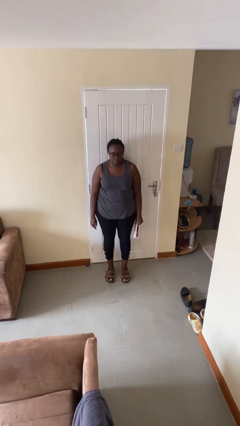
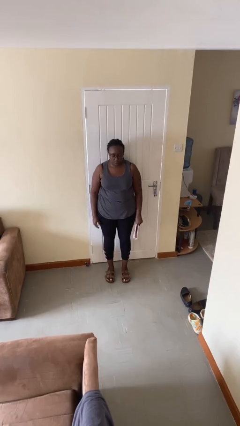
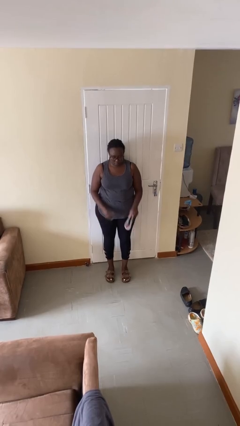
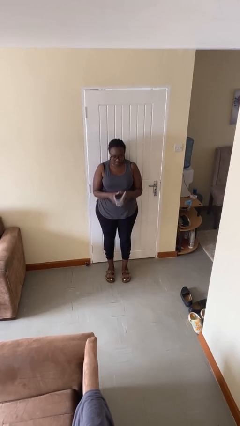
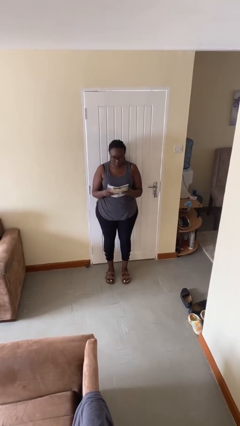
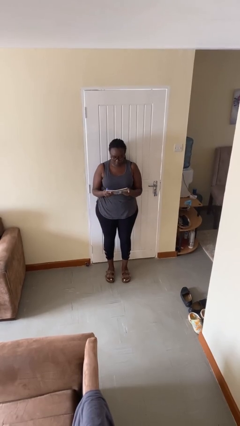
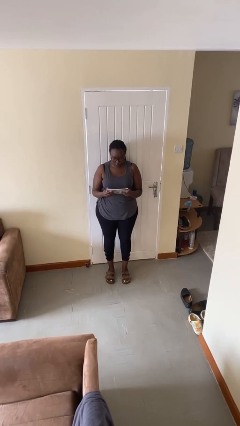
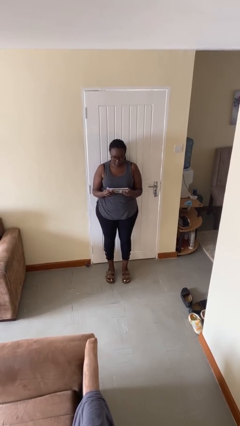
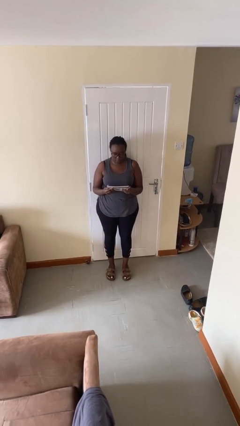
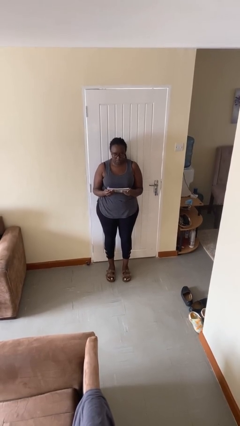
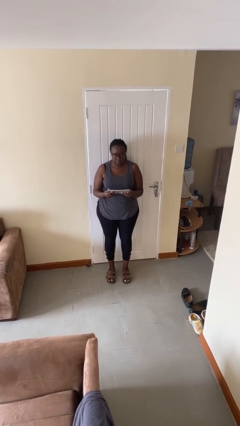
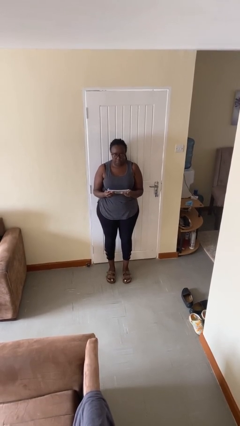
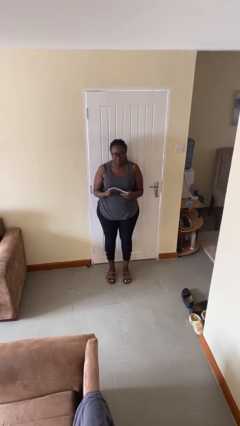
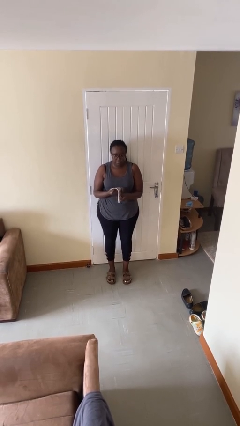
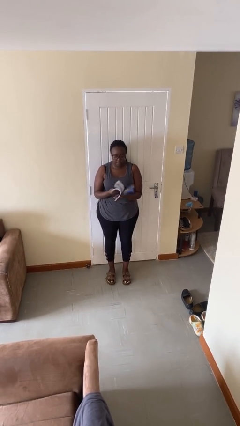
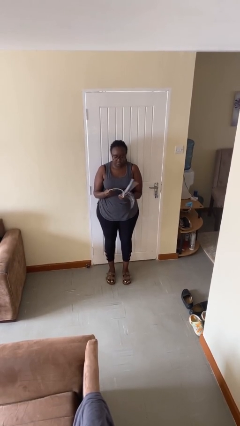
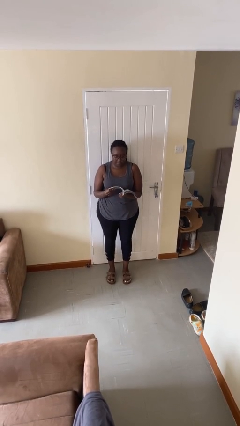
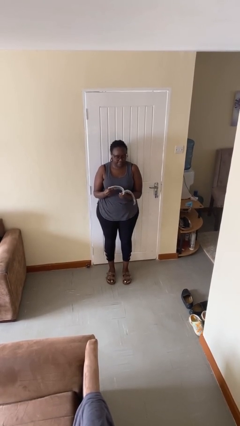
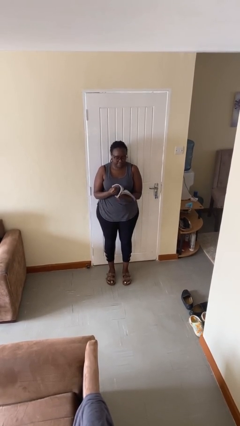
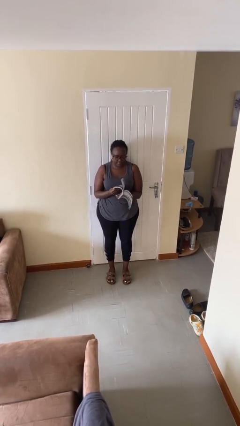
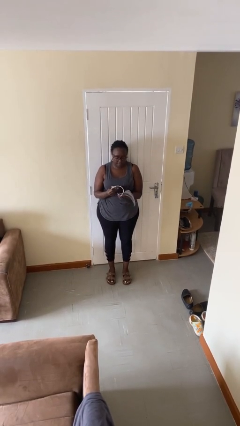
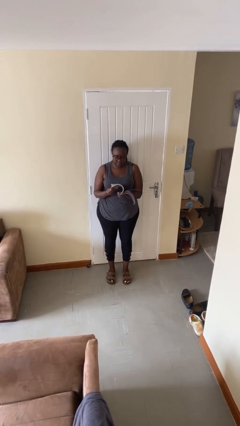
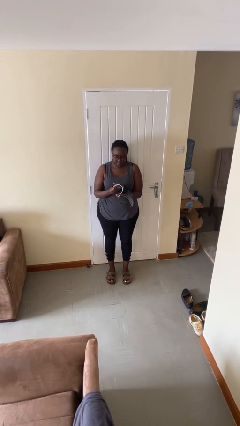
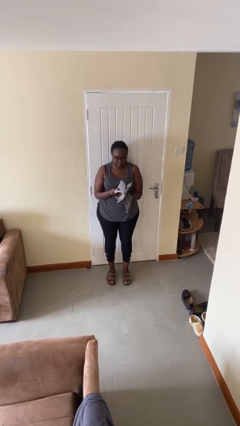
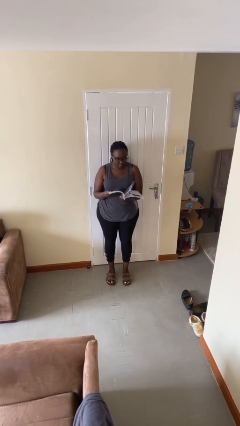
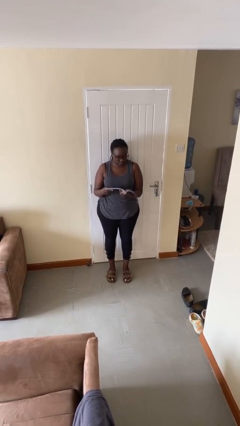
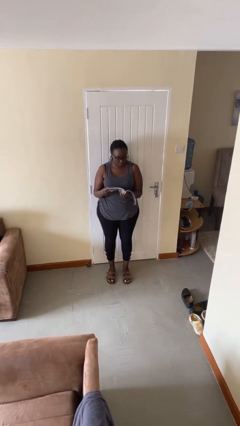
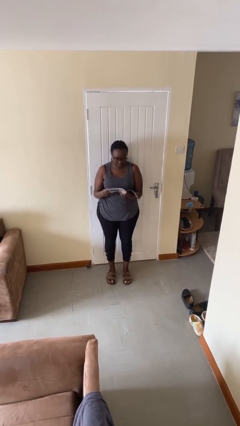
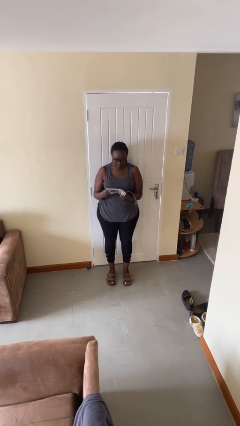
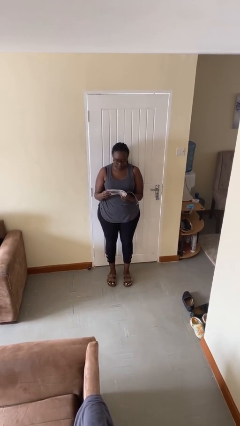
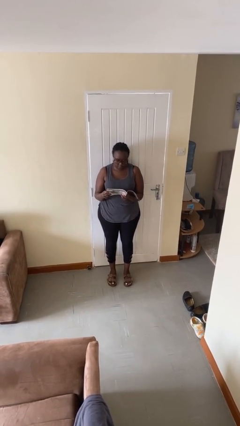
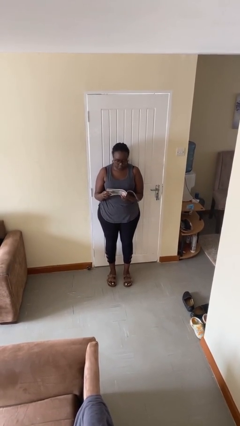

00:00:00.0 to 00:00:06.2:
person reads magazine

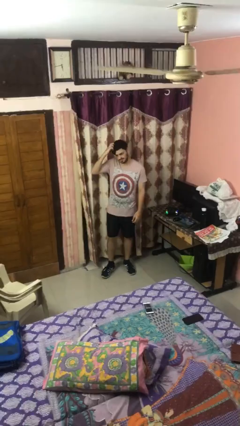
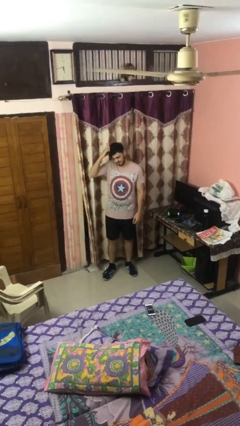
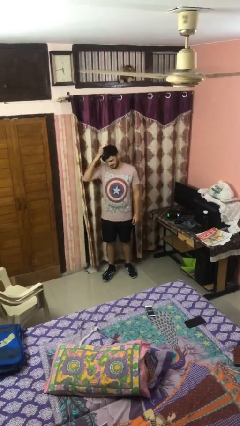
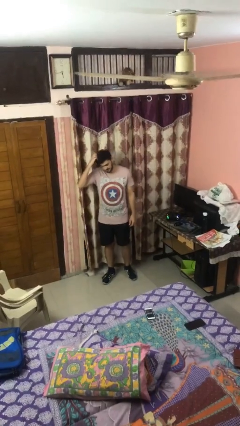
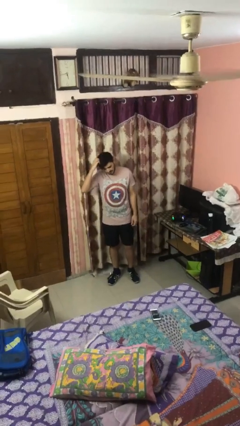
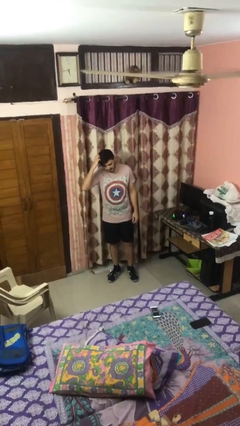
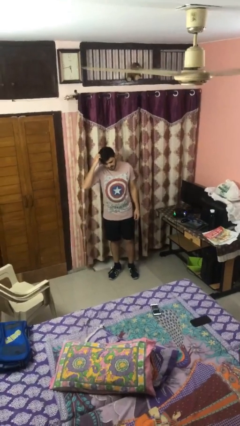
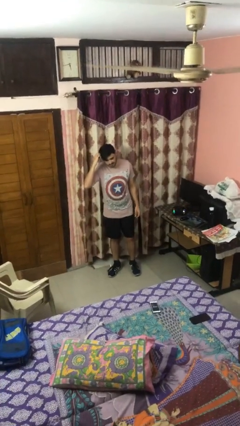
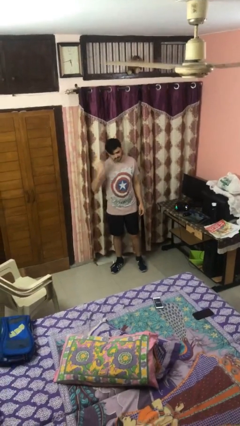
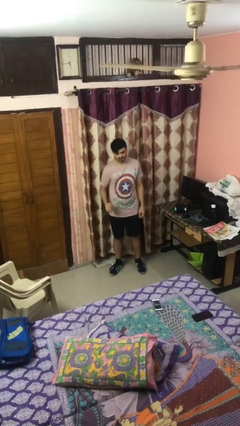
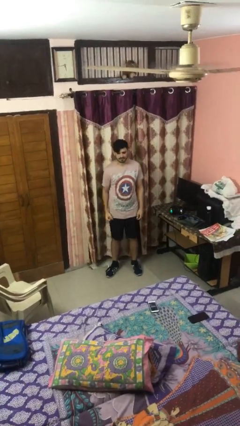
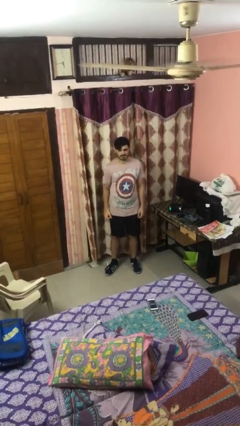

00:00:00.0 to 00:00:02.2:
person scratches face

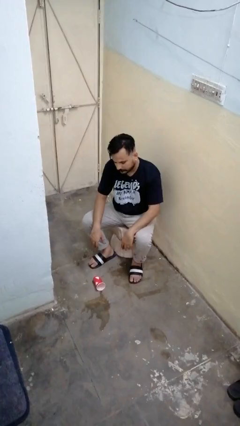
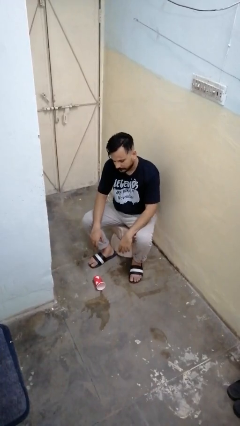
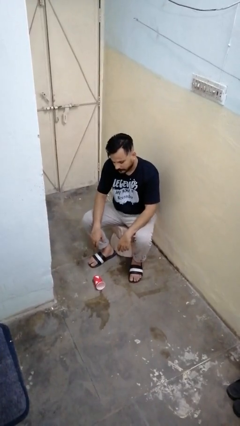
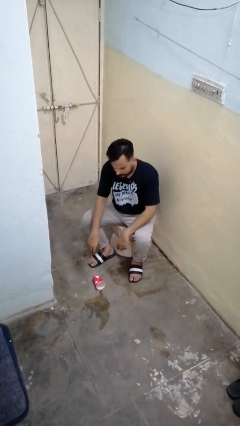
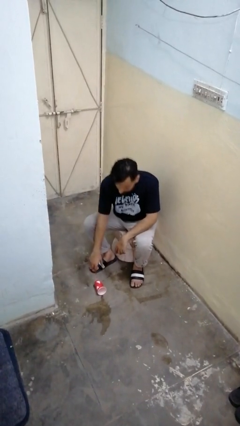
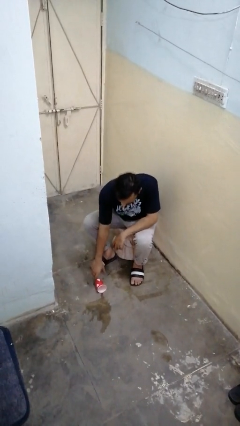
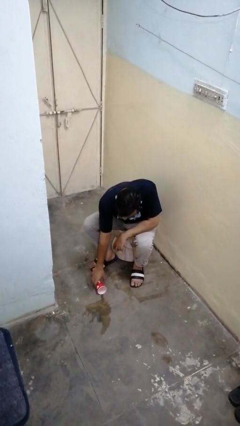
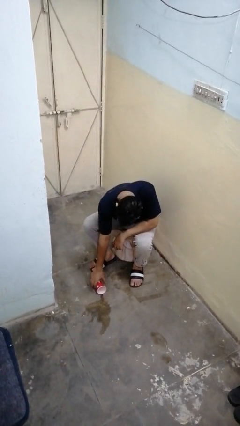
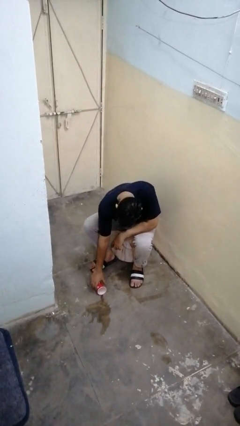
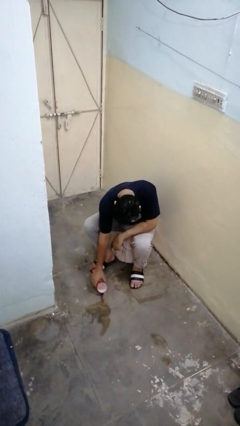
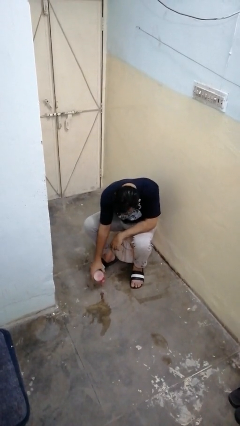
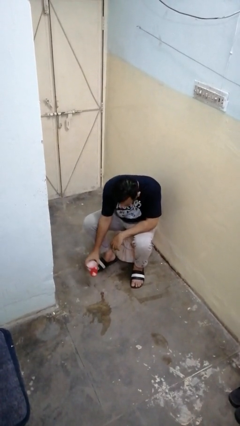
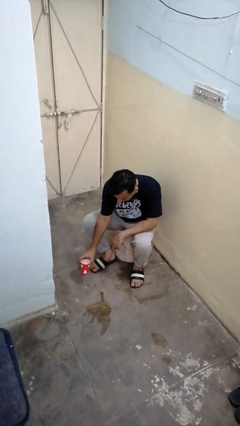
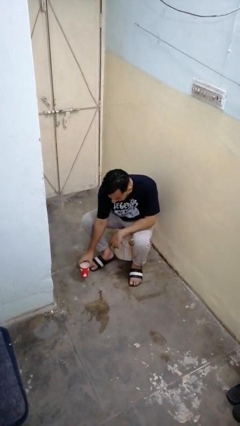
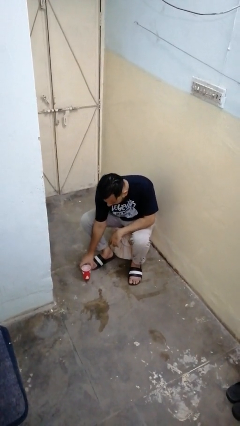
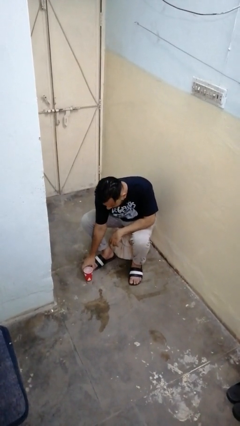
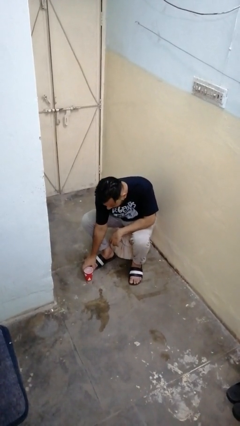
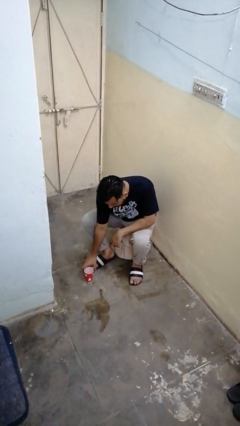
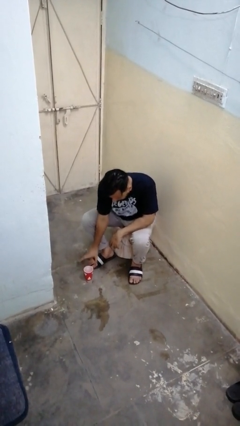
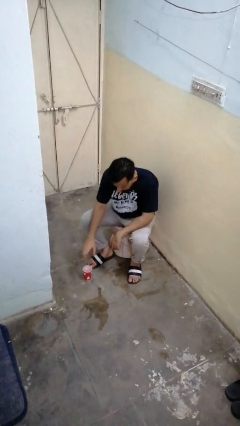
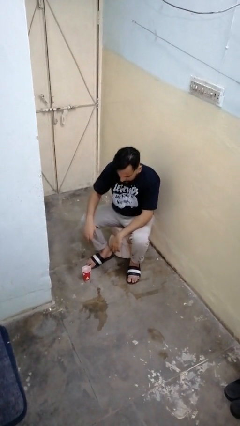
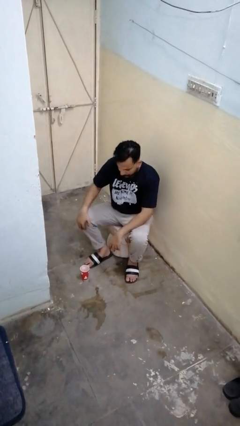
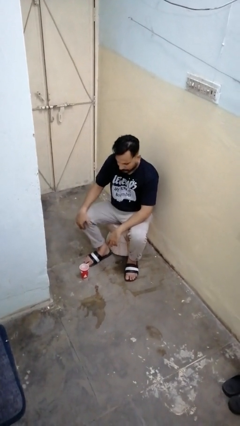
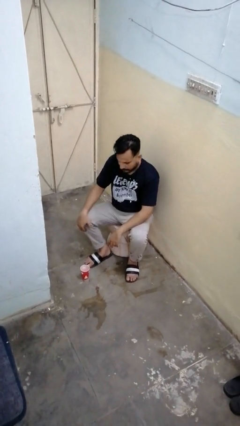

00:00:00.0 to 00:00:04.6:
person sets upright glass

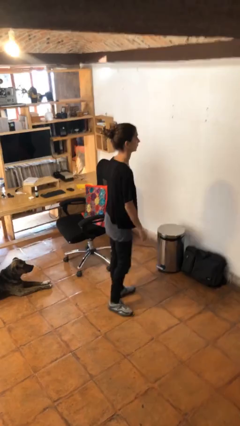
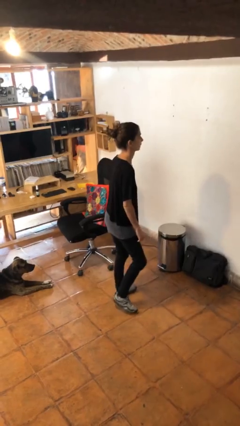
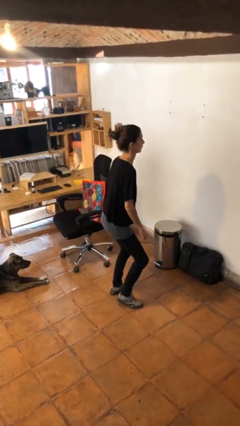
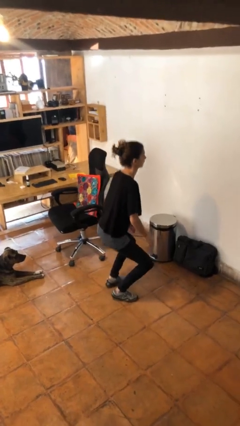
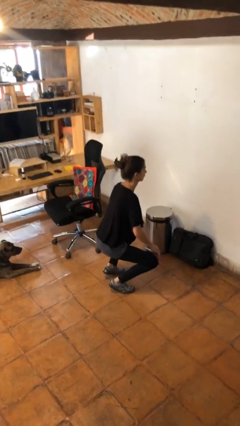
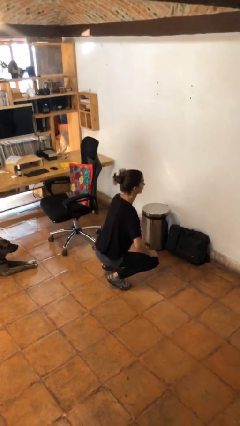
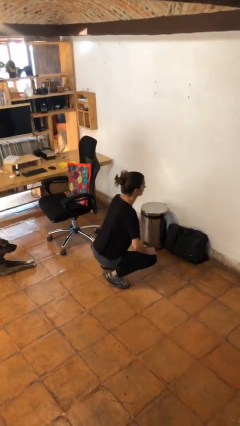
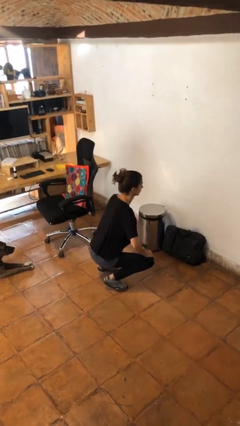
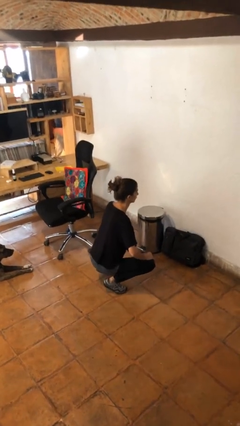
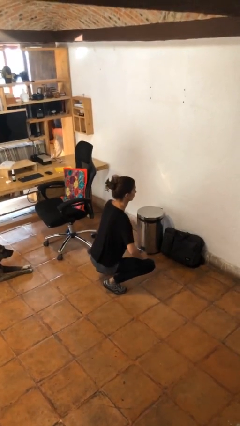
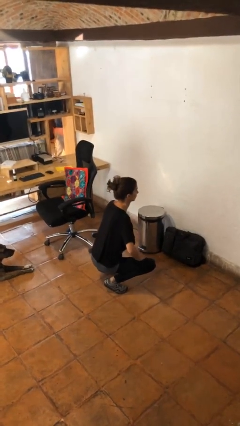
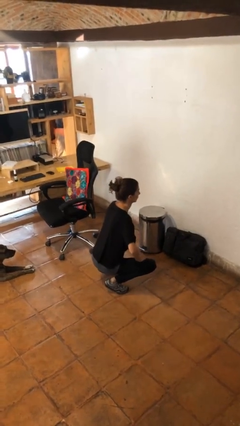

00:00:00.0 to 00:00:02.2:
person squats

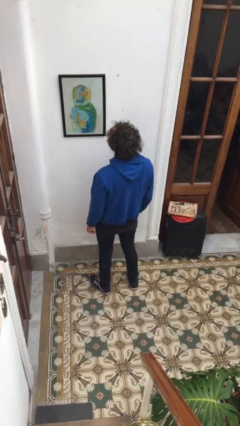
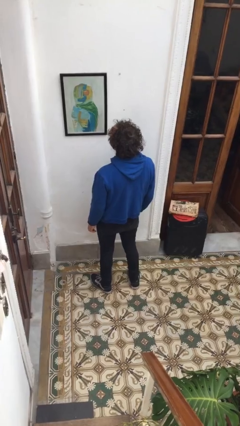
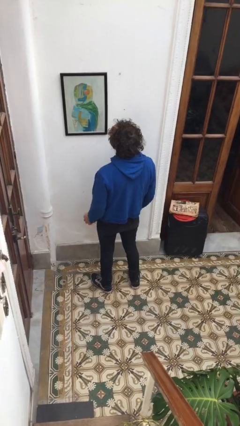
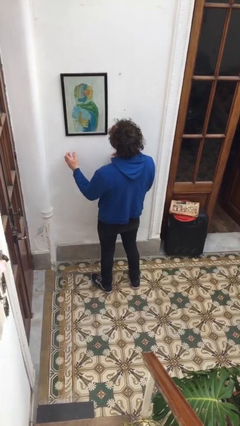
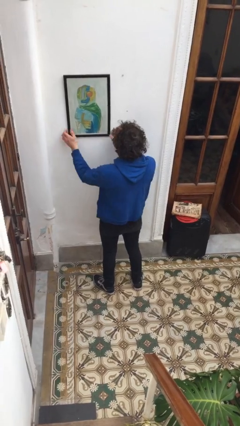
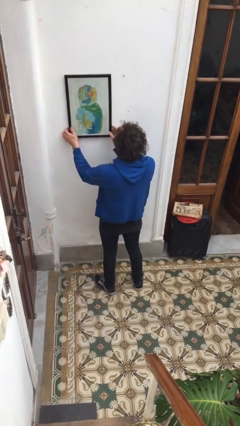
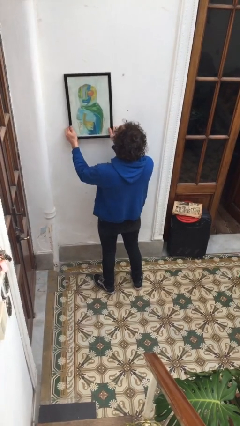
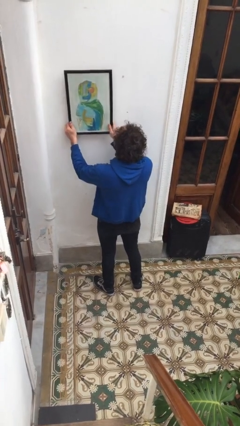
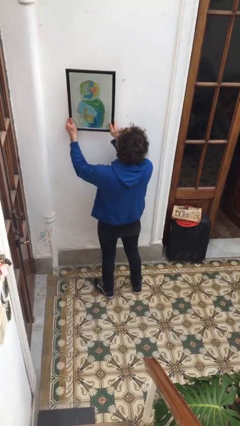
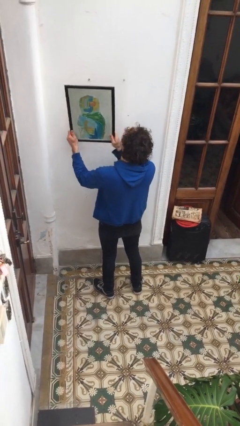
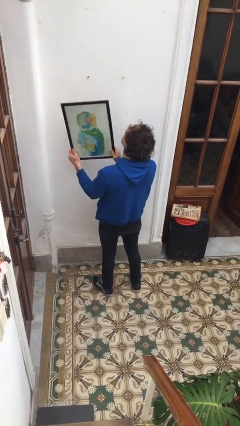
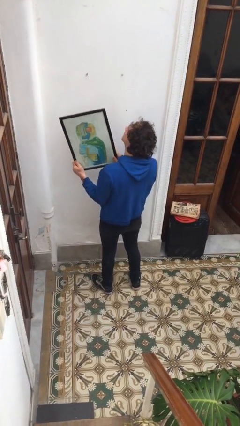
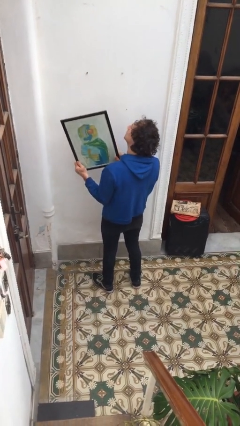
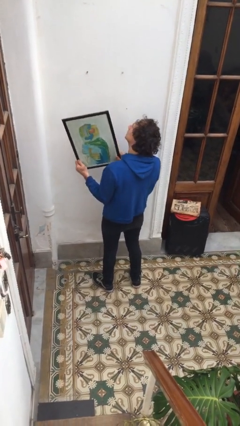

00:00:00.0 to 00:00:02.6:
person takes down picture frame
